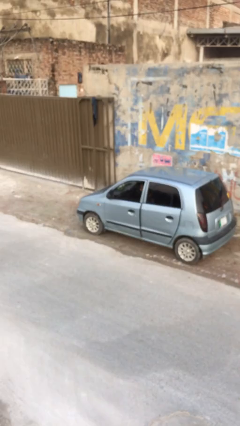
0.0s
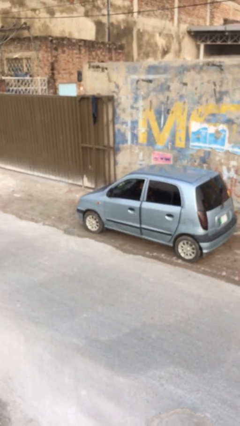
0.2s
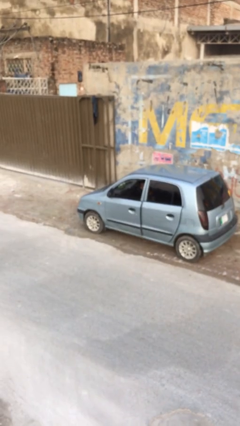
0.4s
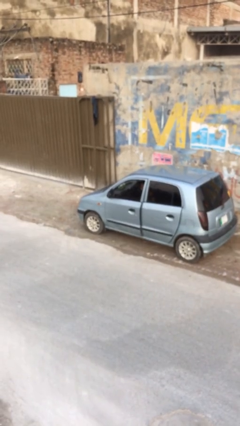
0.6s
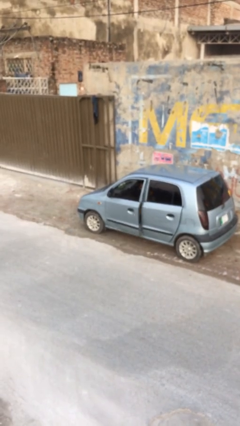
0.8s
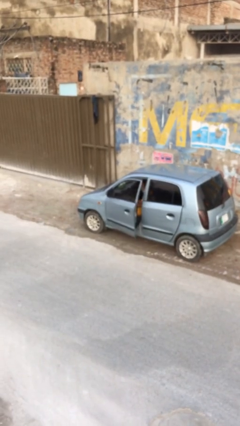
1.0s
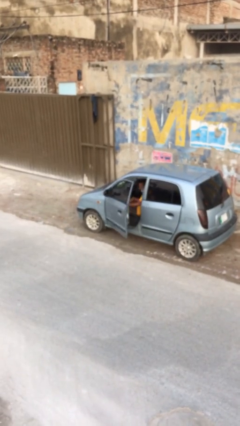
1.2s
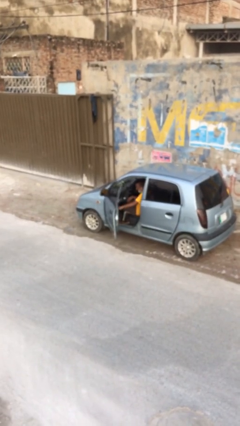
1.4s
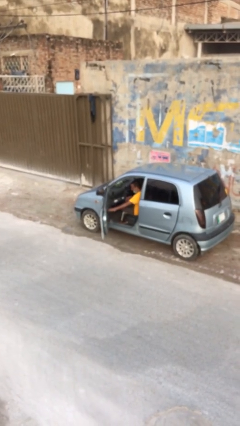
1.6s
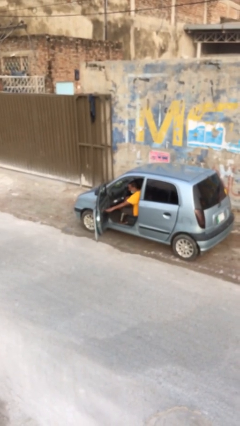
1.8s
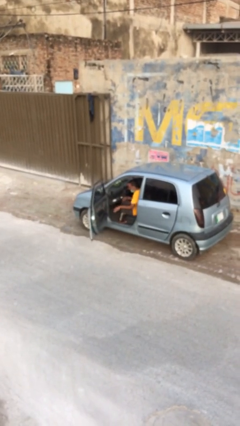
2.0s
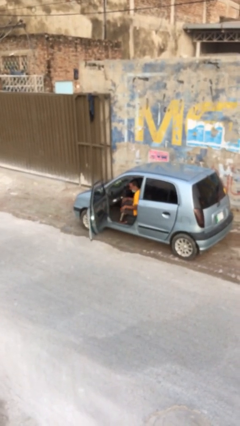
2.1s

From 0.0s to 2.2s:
person opens car door

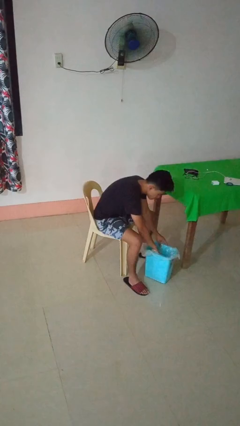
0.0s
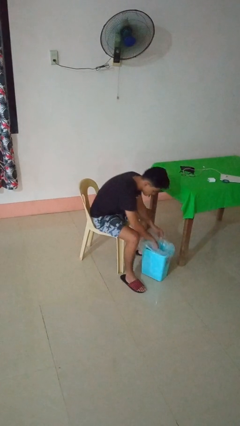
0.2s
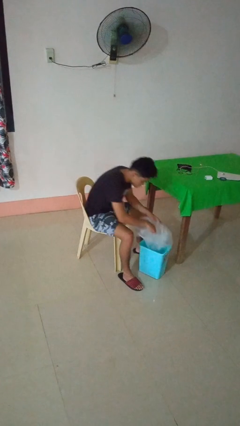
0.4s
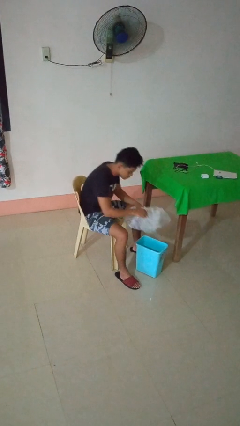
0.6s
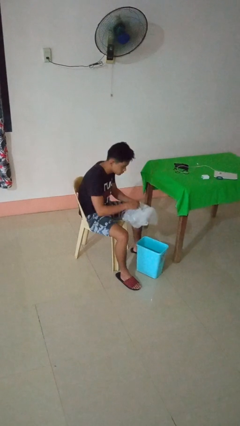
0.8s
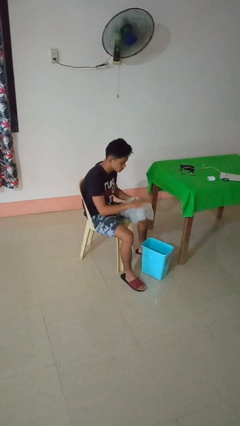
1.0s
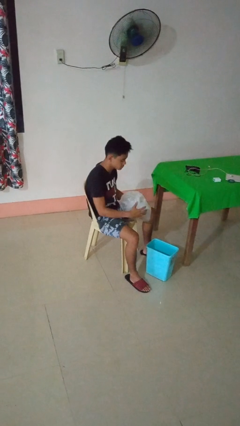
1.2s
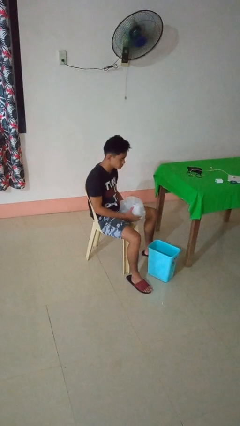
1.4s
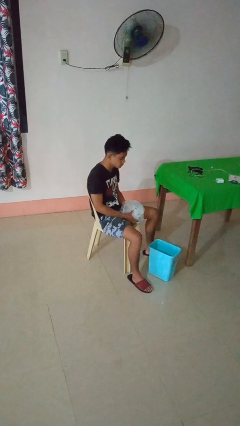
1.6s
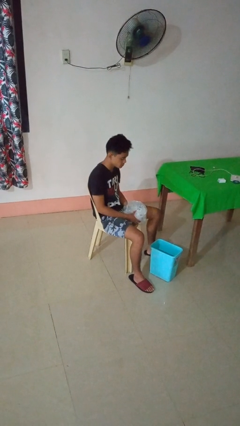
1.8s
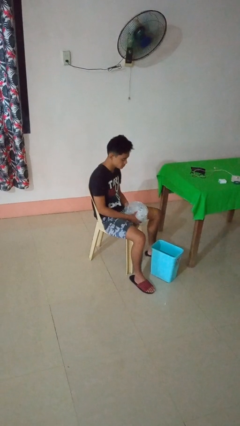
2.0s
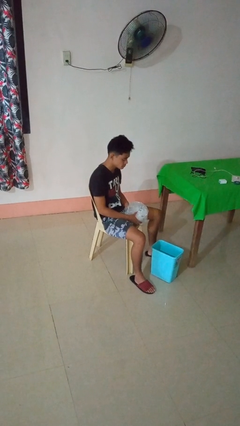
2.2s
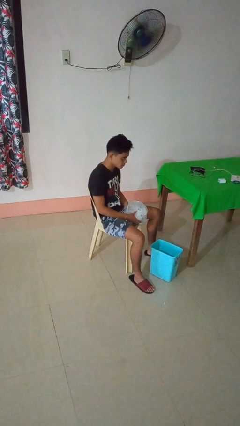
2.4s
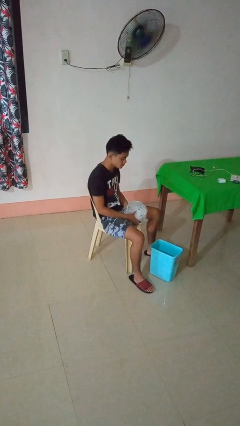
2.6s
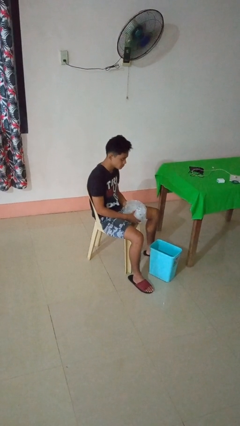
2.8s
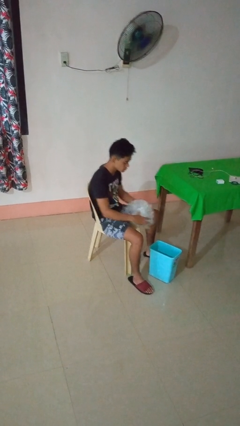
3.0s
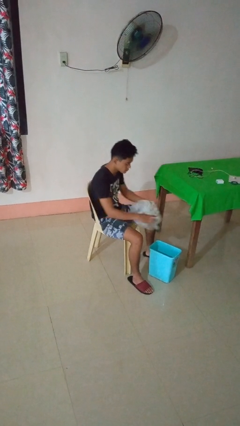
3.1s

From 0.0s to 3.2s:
person removes trashbag from trashcan

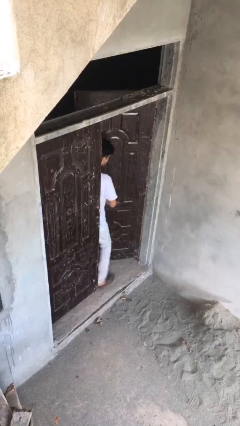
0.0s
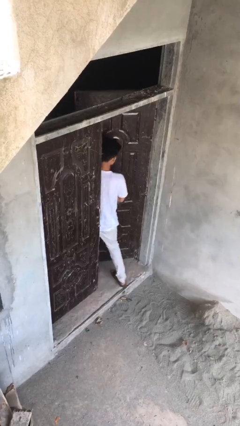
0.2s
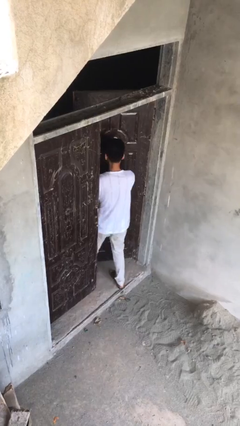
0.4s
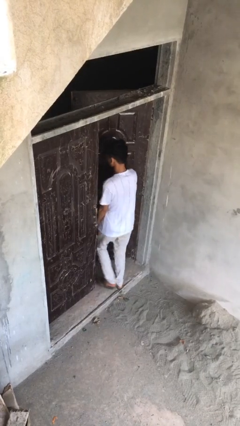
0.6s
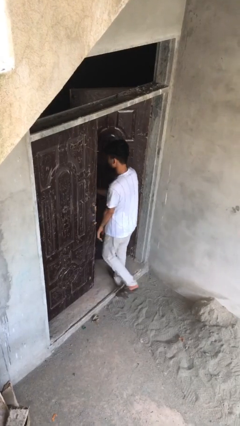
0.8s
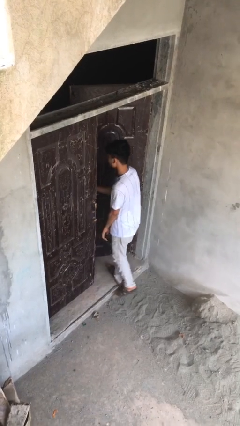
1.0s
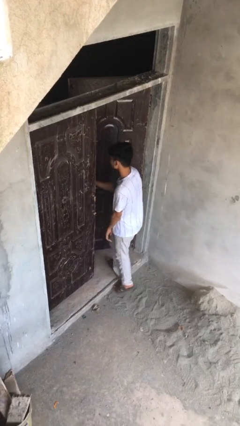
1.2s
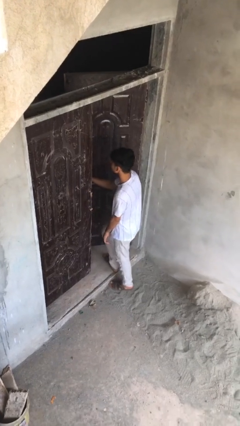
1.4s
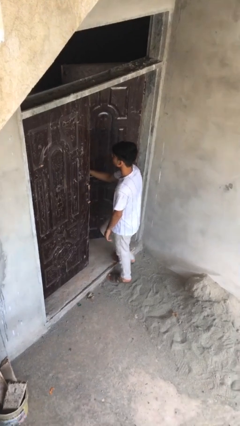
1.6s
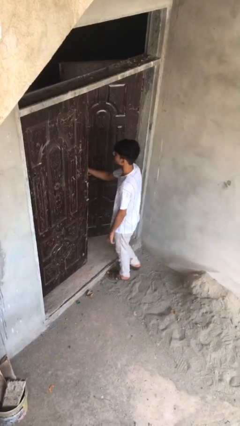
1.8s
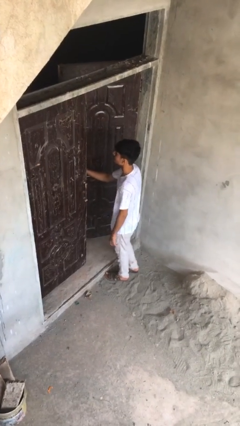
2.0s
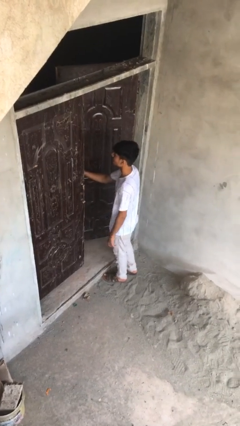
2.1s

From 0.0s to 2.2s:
person enters scene through structure

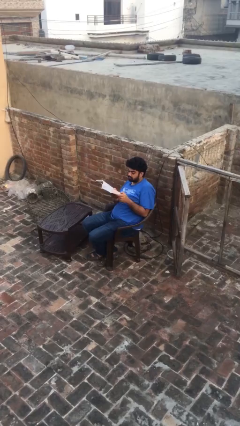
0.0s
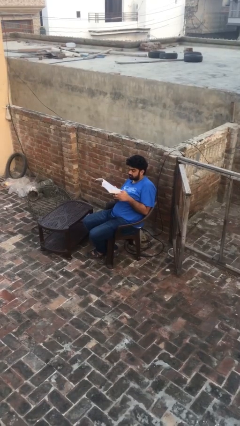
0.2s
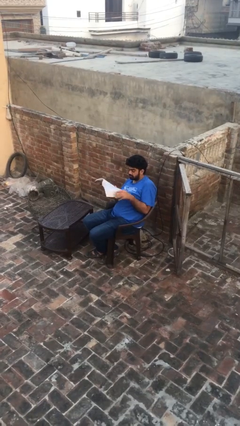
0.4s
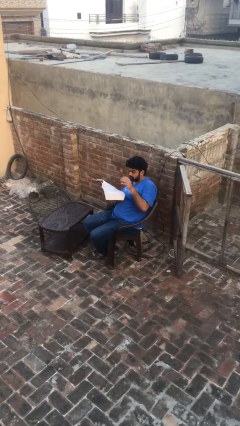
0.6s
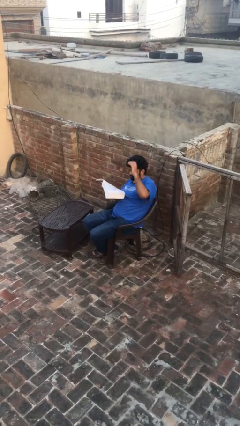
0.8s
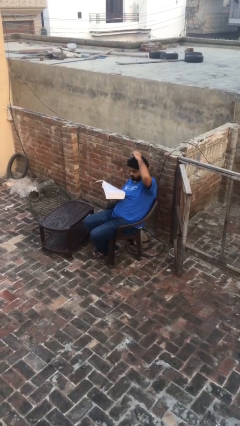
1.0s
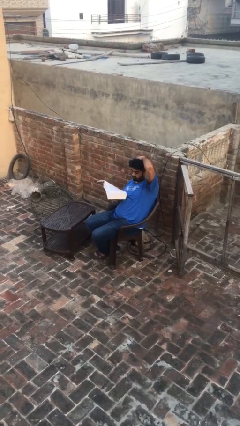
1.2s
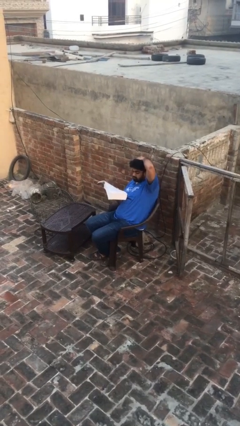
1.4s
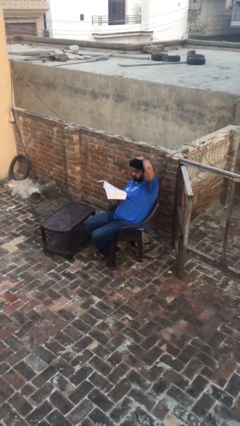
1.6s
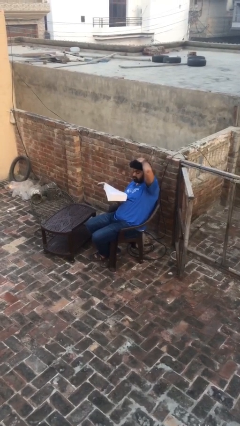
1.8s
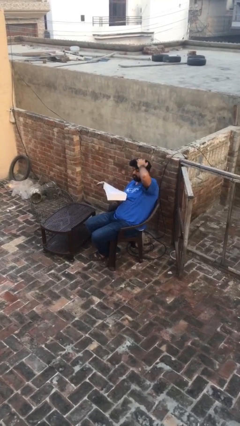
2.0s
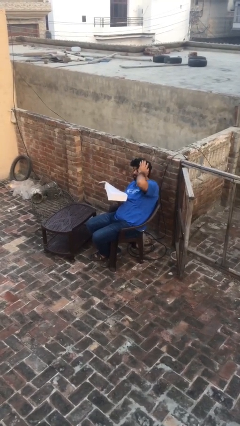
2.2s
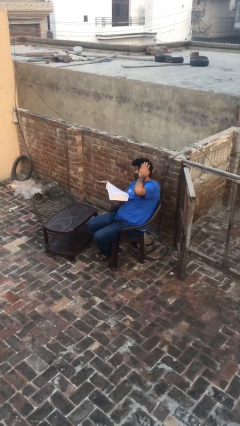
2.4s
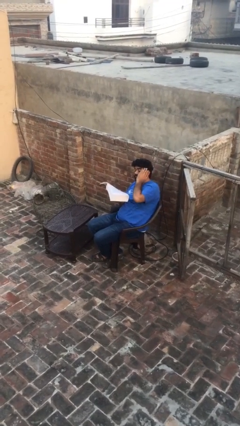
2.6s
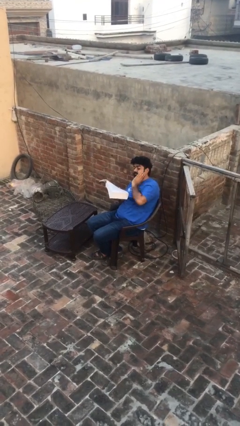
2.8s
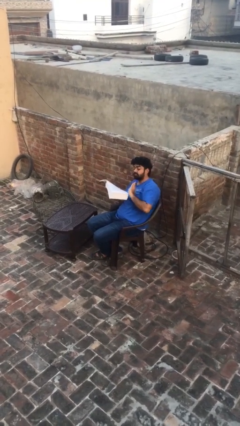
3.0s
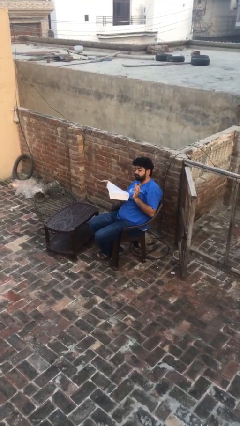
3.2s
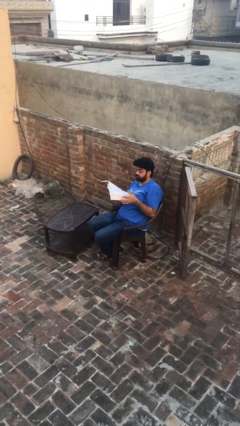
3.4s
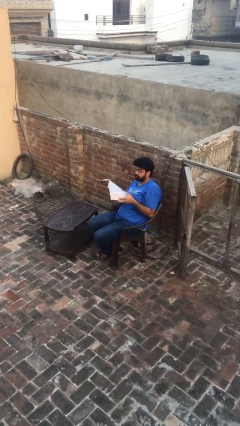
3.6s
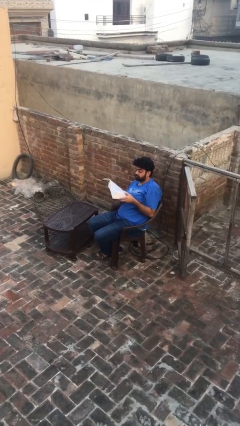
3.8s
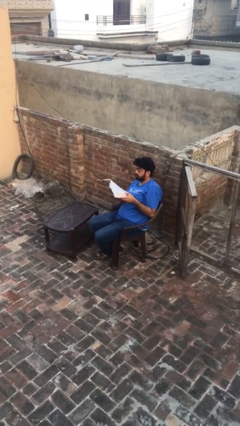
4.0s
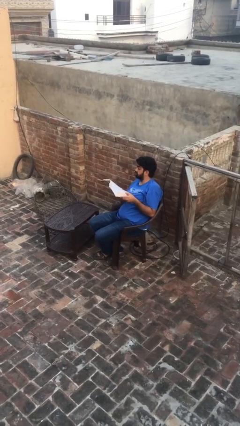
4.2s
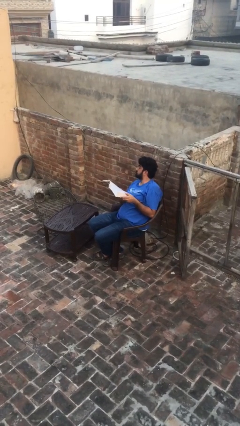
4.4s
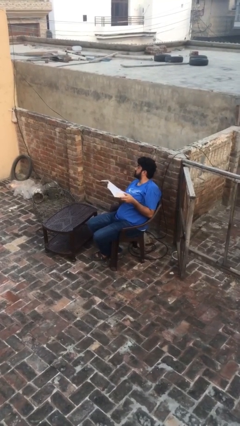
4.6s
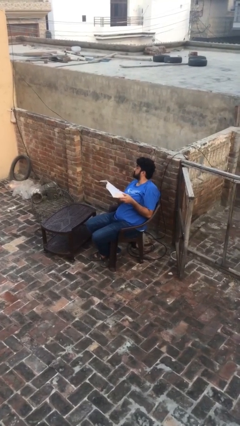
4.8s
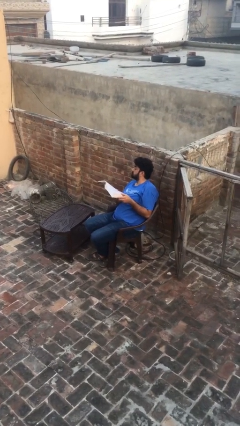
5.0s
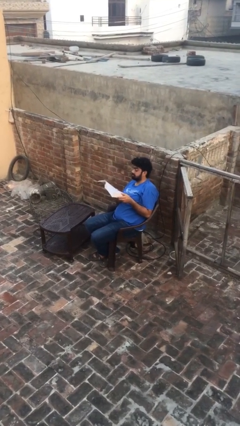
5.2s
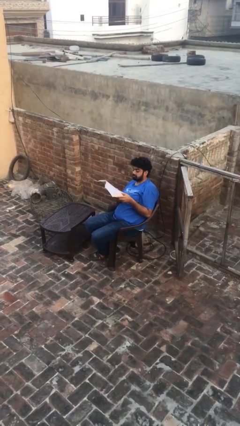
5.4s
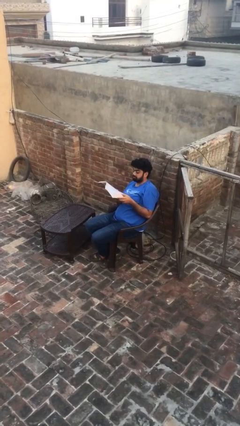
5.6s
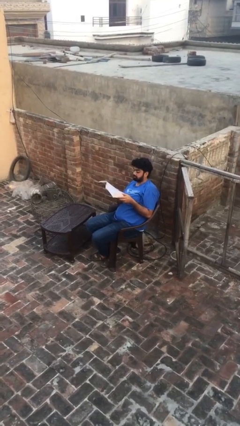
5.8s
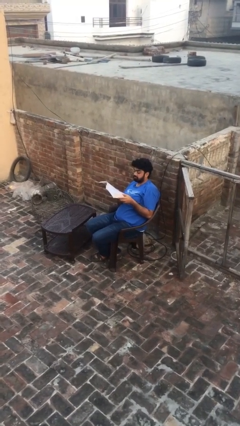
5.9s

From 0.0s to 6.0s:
person reads document

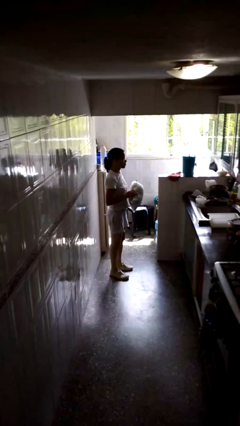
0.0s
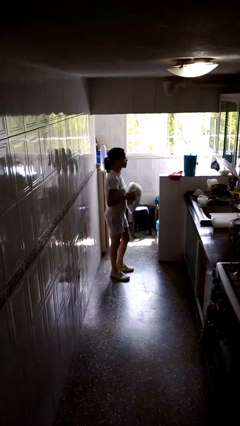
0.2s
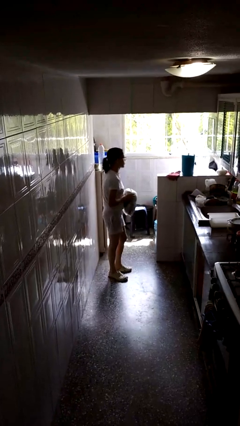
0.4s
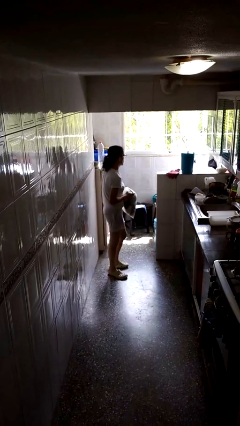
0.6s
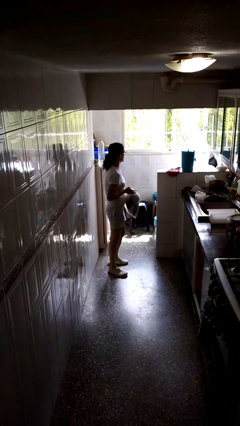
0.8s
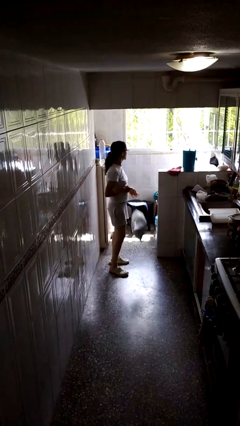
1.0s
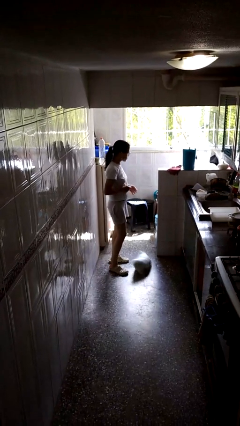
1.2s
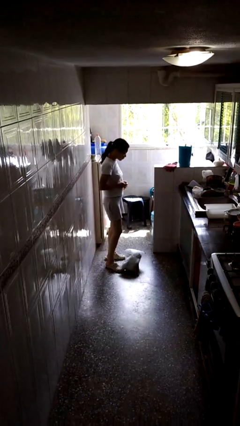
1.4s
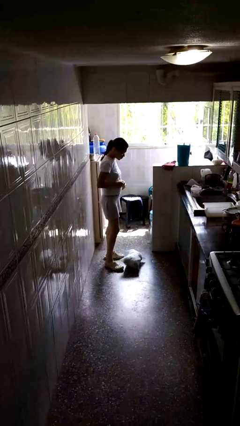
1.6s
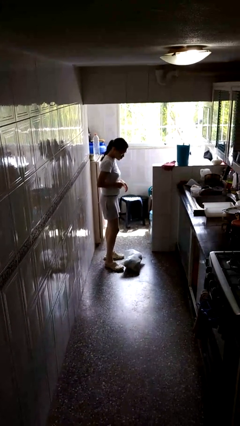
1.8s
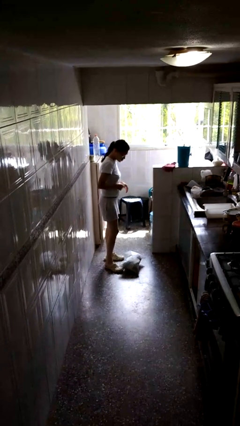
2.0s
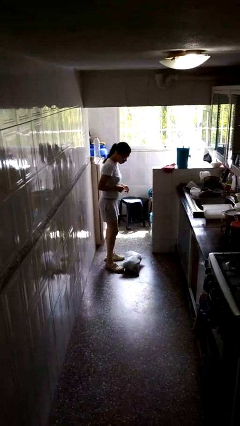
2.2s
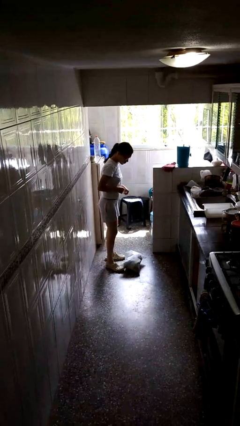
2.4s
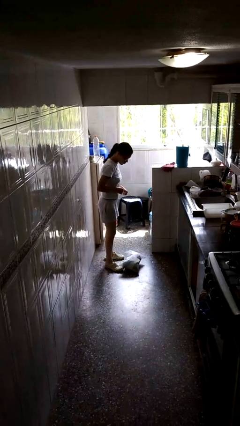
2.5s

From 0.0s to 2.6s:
person drops object

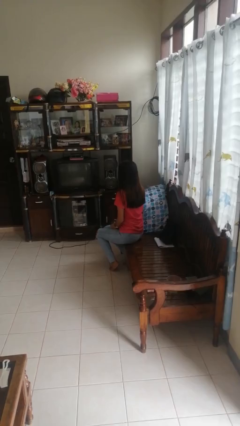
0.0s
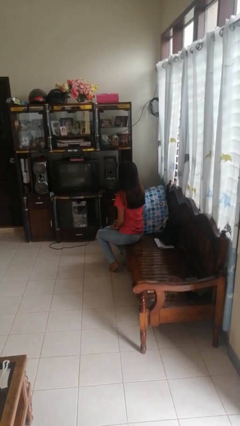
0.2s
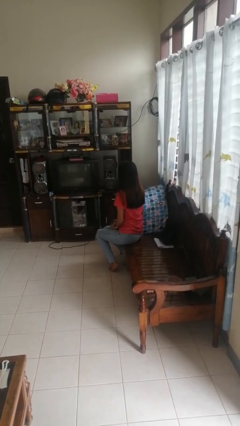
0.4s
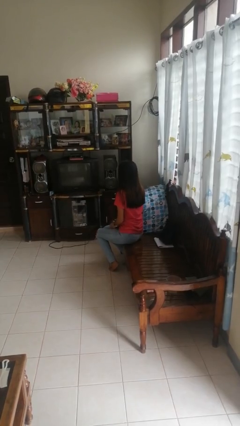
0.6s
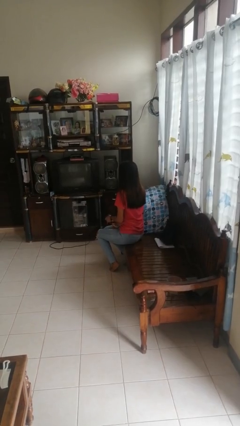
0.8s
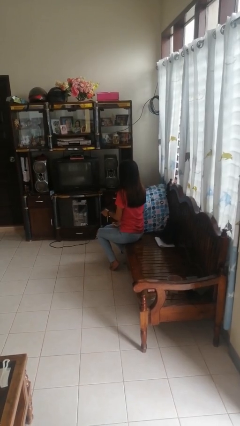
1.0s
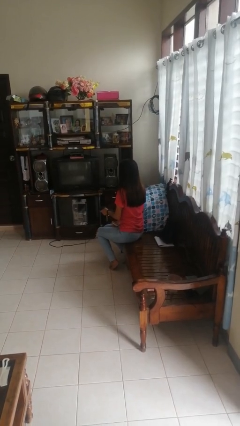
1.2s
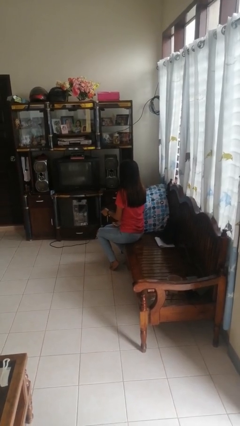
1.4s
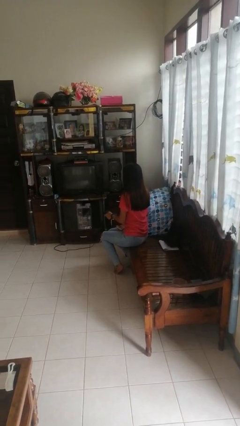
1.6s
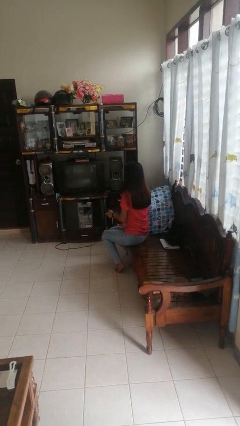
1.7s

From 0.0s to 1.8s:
person uses television remote
